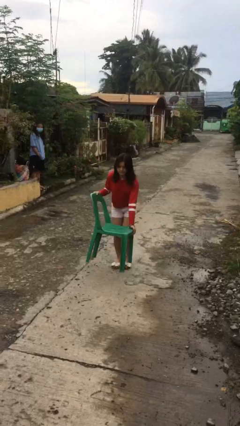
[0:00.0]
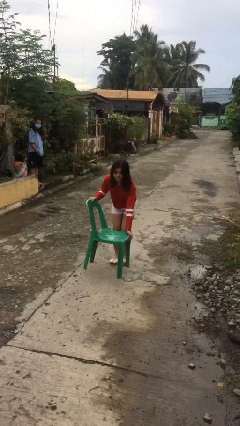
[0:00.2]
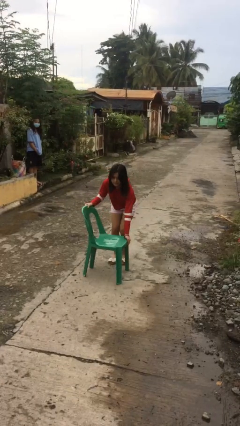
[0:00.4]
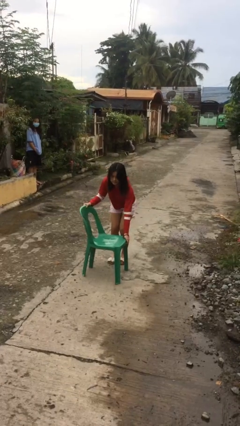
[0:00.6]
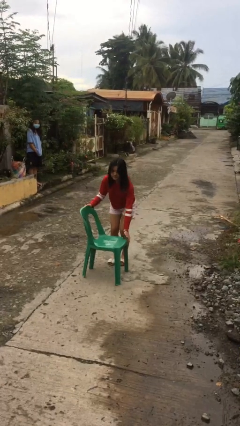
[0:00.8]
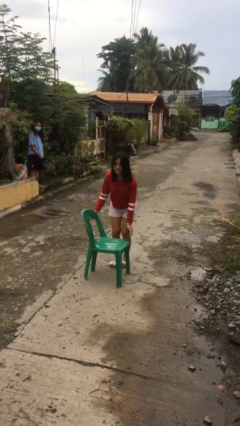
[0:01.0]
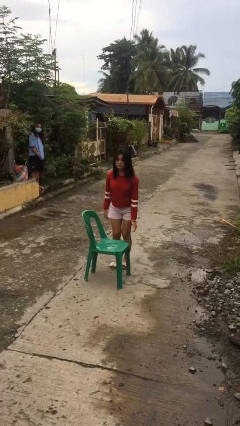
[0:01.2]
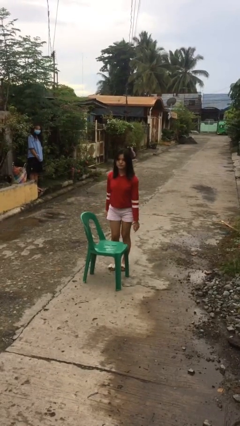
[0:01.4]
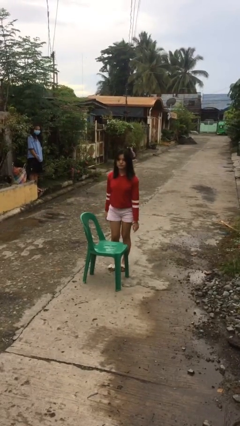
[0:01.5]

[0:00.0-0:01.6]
person puts down object on floor

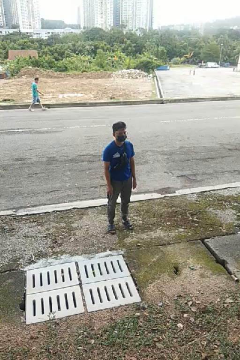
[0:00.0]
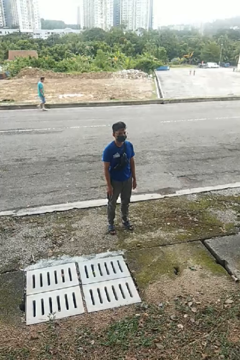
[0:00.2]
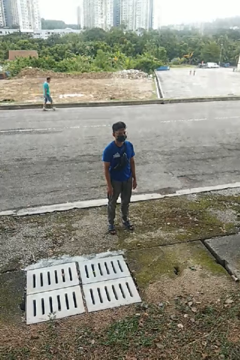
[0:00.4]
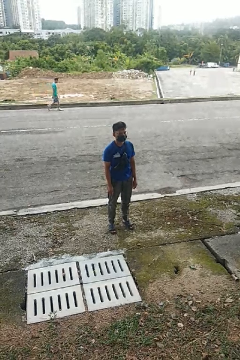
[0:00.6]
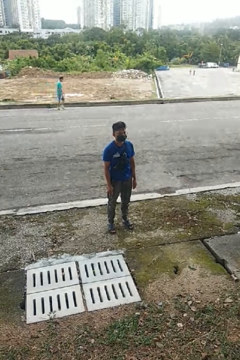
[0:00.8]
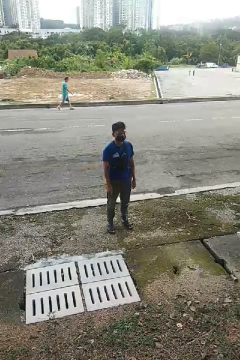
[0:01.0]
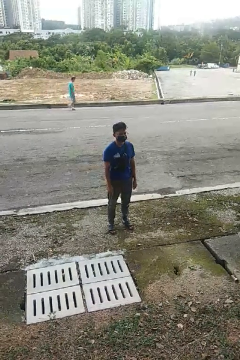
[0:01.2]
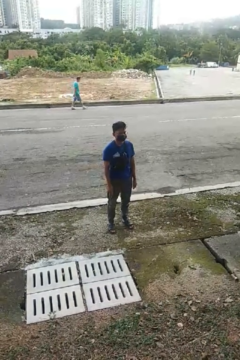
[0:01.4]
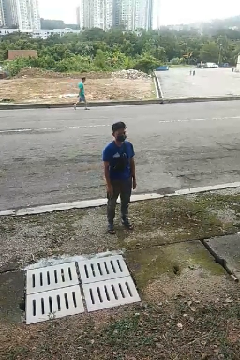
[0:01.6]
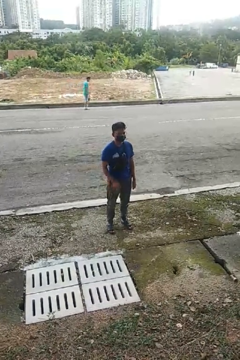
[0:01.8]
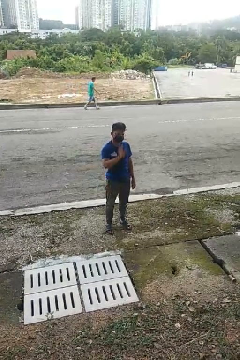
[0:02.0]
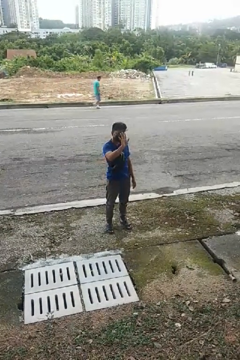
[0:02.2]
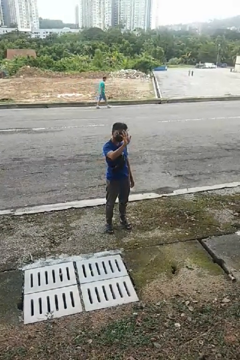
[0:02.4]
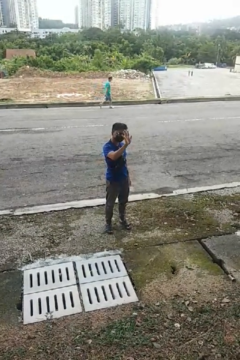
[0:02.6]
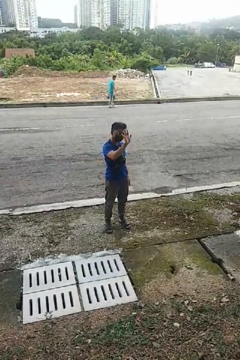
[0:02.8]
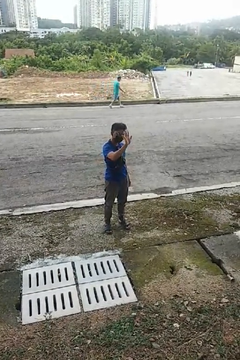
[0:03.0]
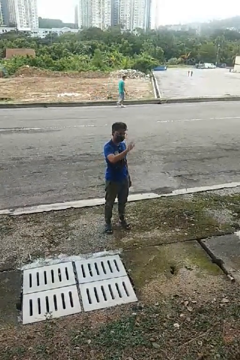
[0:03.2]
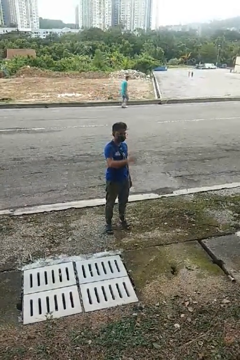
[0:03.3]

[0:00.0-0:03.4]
person gestures stop

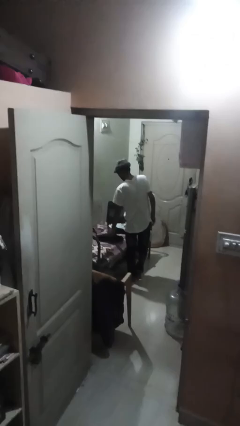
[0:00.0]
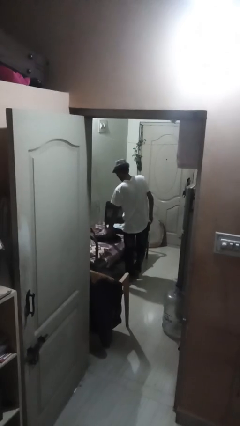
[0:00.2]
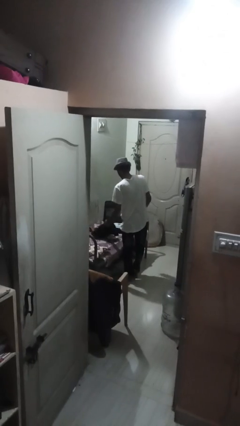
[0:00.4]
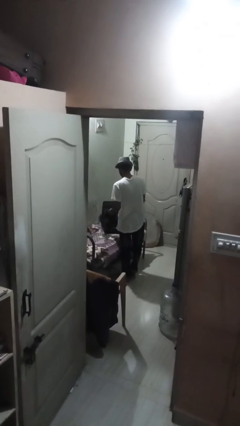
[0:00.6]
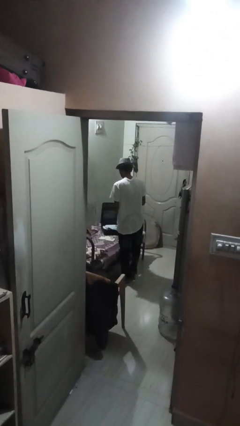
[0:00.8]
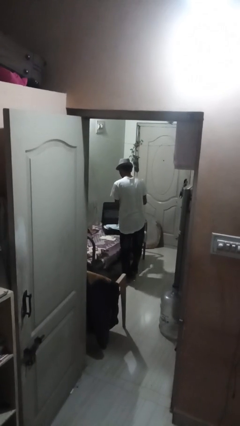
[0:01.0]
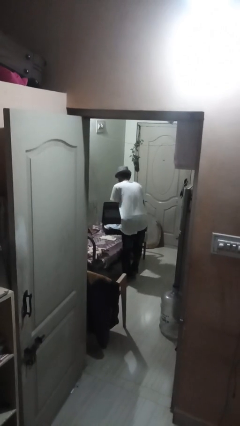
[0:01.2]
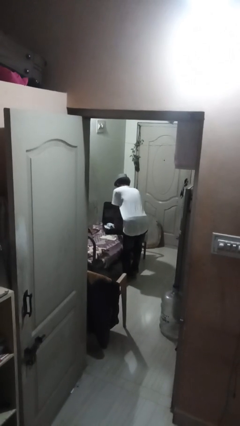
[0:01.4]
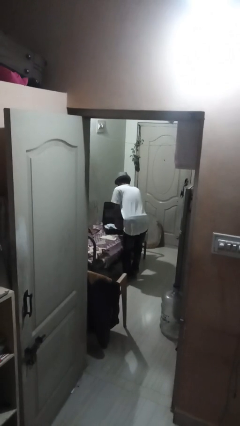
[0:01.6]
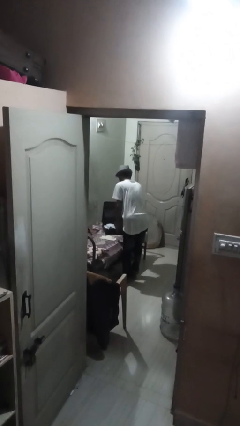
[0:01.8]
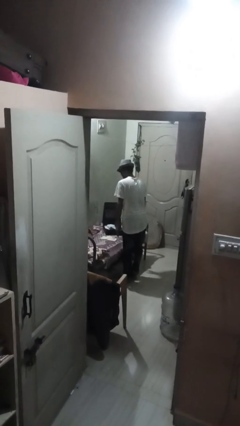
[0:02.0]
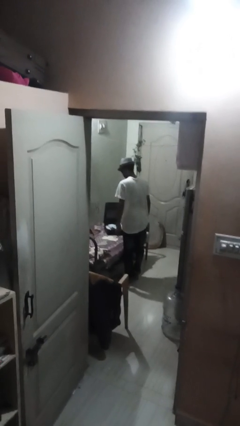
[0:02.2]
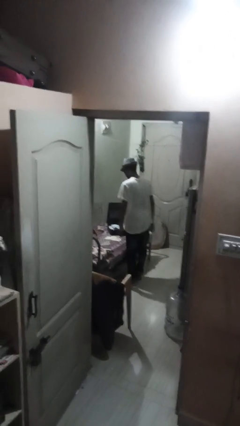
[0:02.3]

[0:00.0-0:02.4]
person loads clothes into suitcase

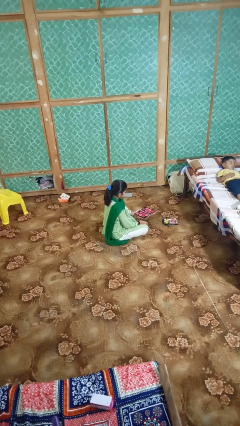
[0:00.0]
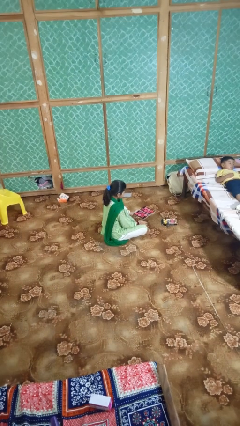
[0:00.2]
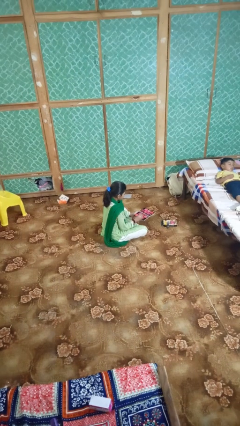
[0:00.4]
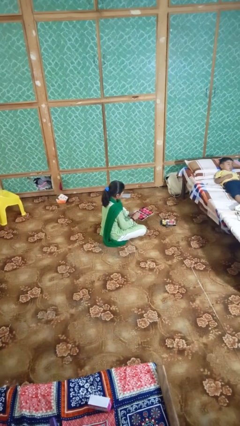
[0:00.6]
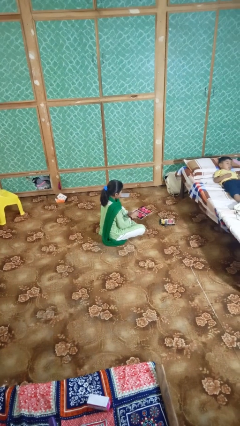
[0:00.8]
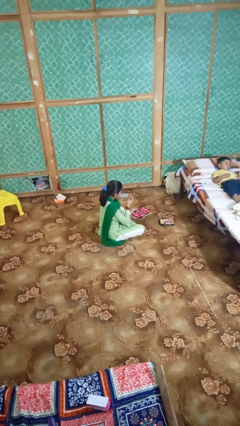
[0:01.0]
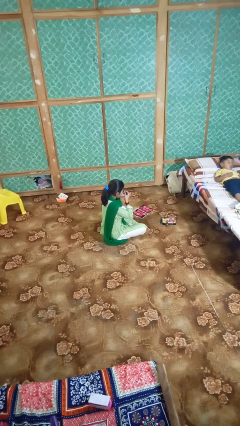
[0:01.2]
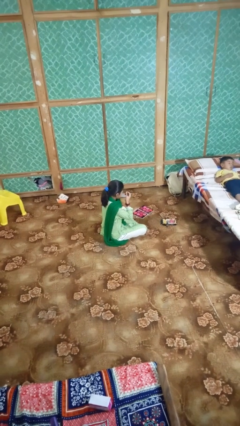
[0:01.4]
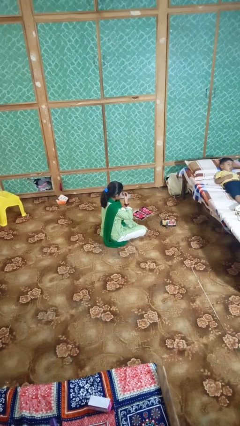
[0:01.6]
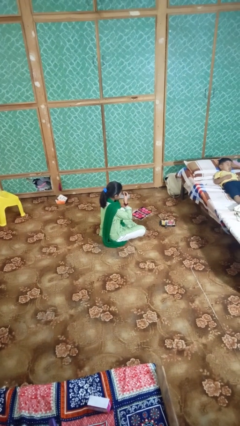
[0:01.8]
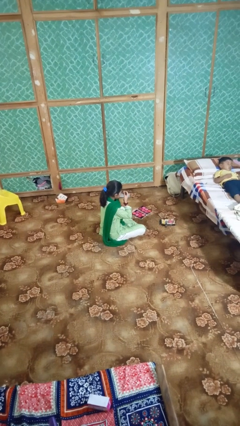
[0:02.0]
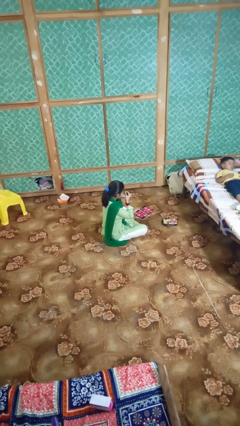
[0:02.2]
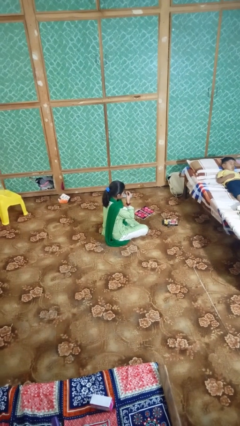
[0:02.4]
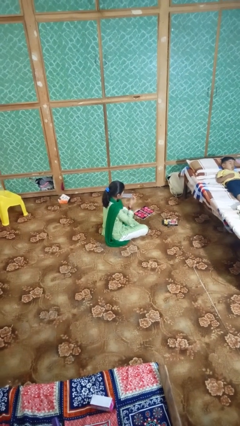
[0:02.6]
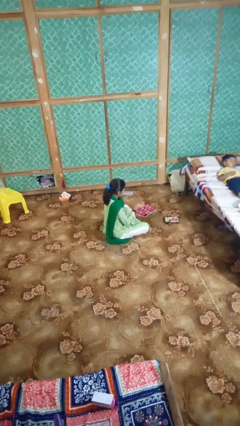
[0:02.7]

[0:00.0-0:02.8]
person applies eye makeup

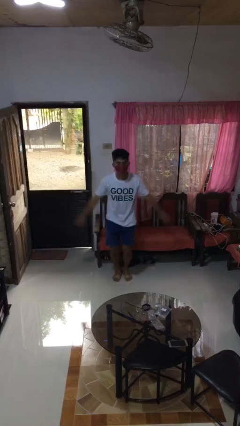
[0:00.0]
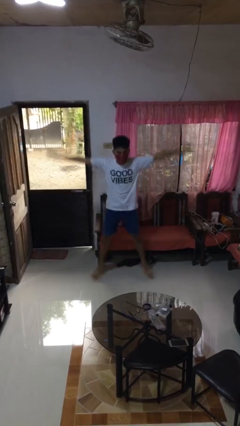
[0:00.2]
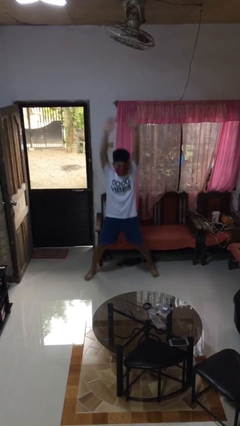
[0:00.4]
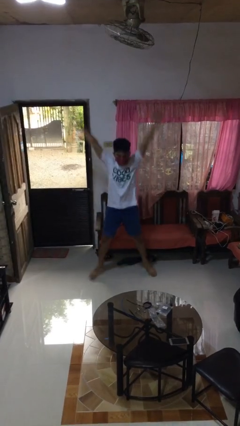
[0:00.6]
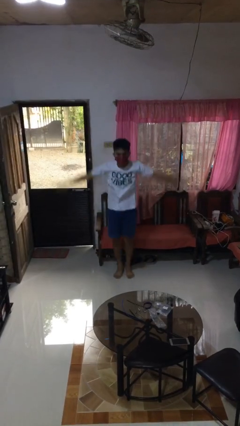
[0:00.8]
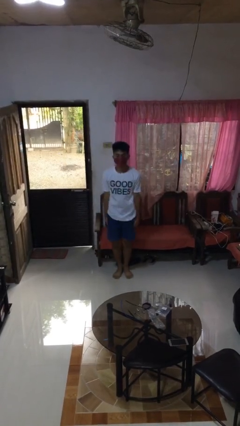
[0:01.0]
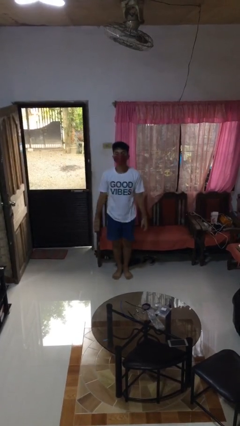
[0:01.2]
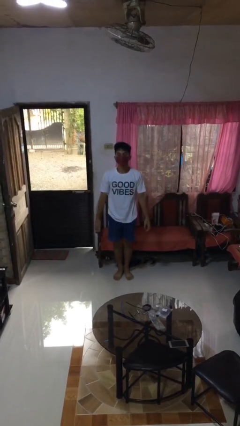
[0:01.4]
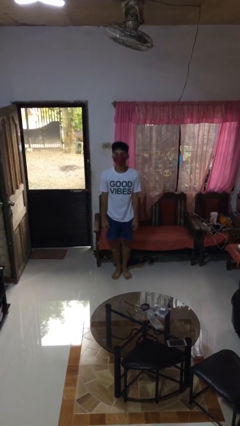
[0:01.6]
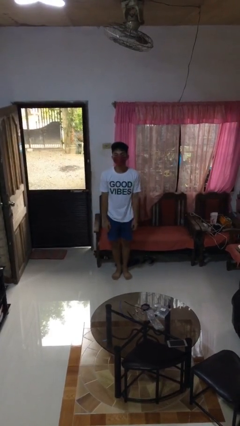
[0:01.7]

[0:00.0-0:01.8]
person exercises with jumping jacks

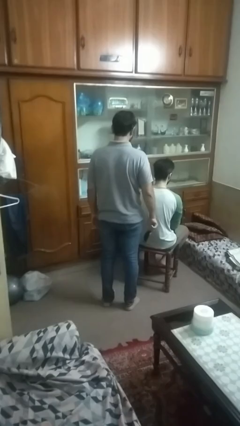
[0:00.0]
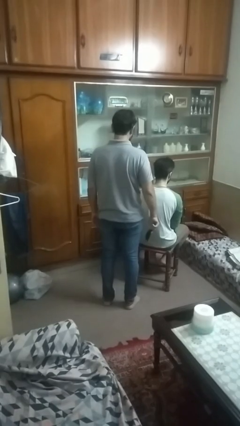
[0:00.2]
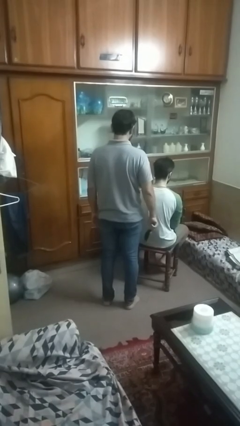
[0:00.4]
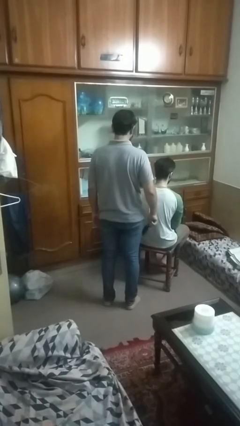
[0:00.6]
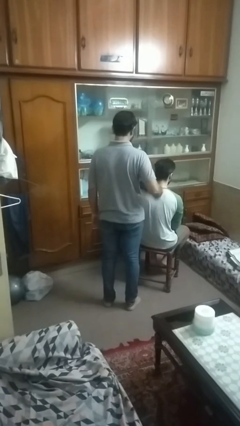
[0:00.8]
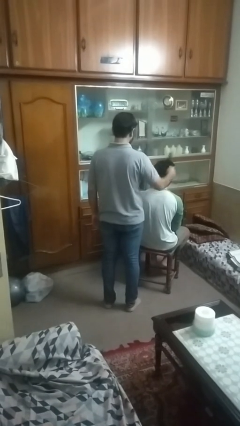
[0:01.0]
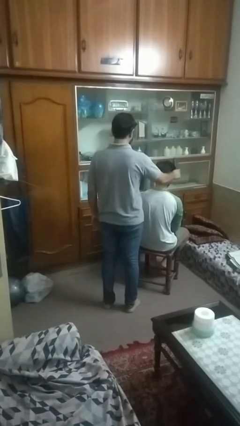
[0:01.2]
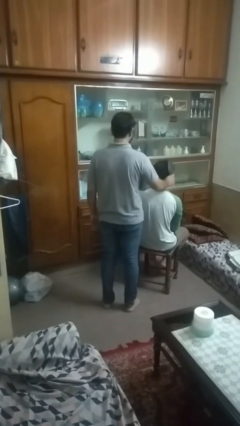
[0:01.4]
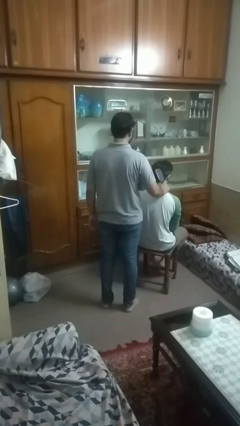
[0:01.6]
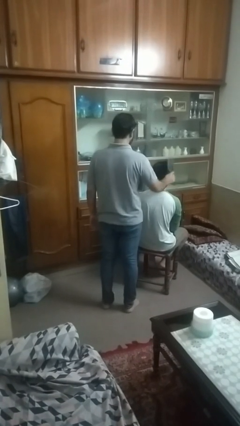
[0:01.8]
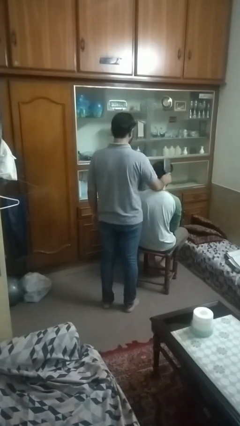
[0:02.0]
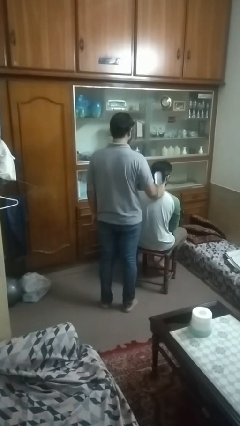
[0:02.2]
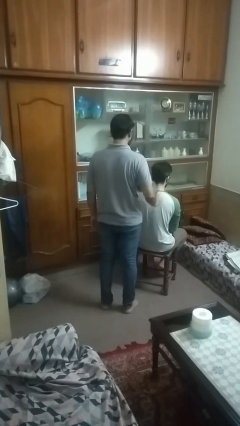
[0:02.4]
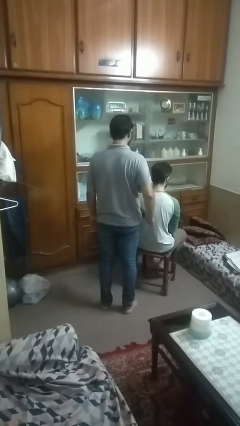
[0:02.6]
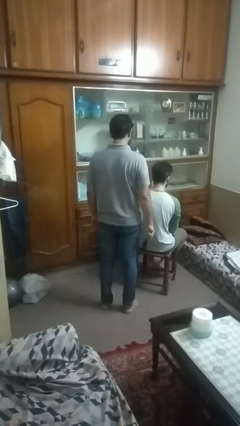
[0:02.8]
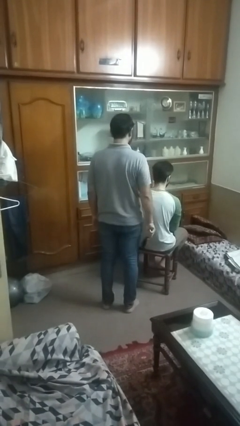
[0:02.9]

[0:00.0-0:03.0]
person brushes hair of person

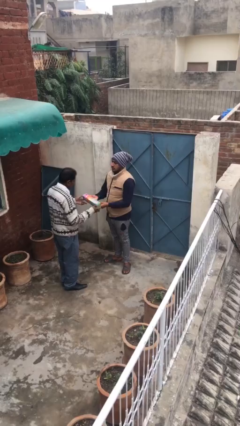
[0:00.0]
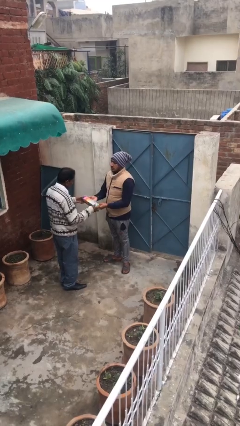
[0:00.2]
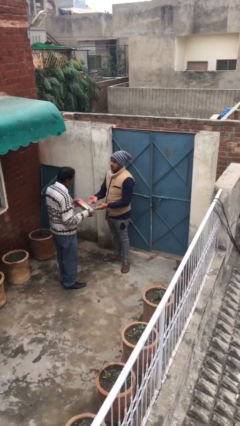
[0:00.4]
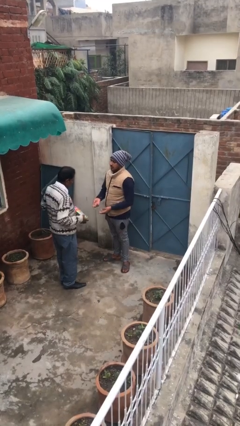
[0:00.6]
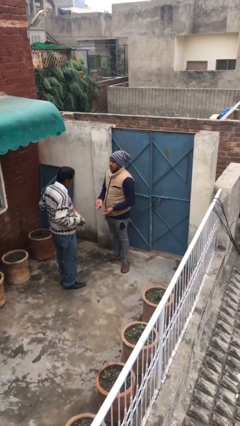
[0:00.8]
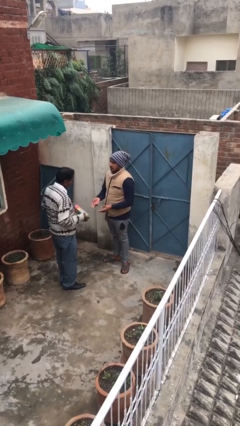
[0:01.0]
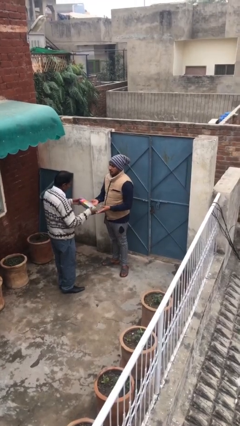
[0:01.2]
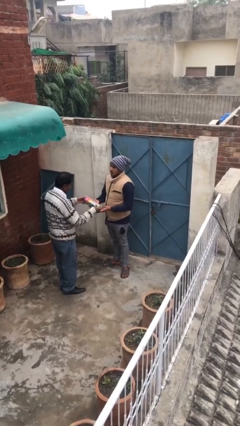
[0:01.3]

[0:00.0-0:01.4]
person transfers object to person

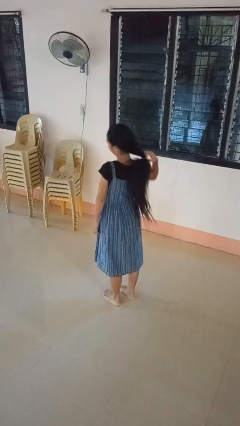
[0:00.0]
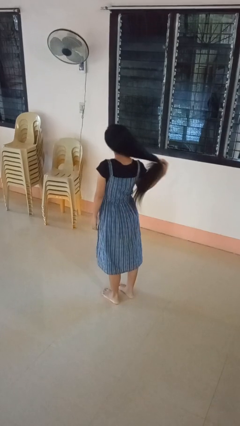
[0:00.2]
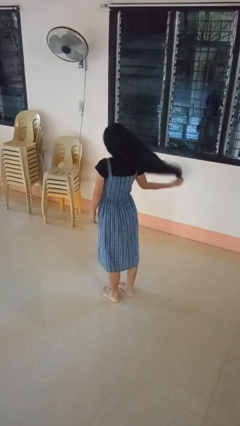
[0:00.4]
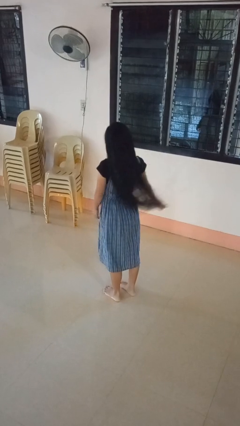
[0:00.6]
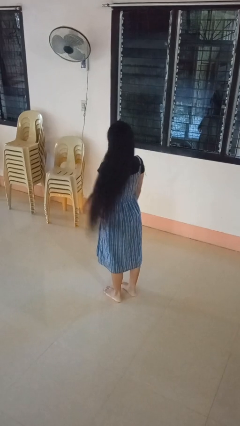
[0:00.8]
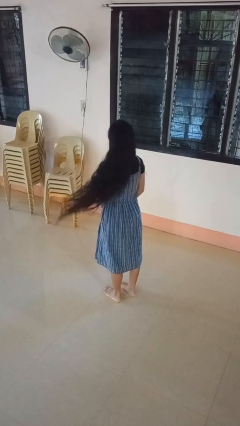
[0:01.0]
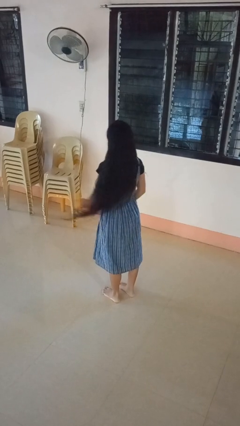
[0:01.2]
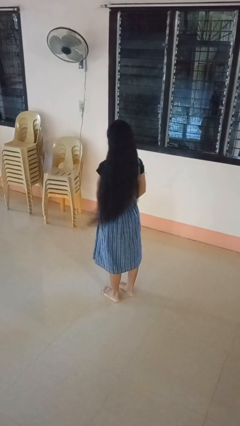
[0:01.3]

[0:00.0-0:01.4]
person takes off hairtie
